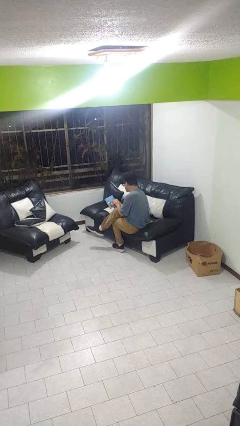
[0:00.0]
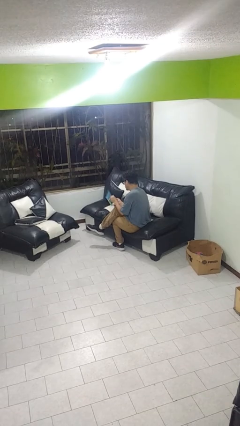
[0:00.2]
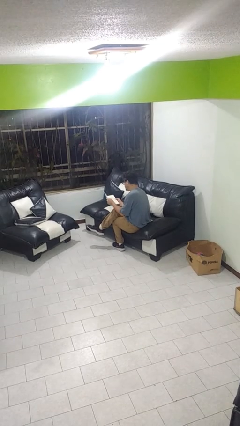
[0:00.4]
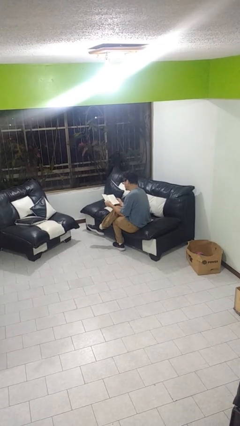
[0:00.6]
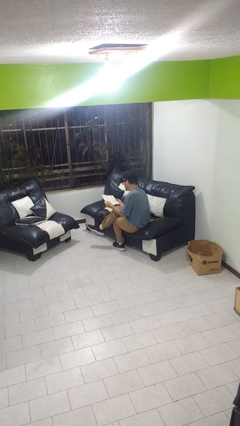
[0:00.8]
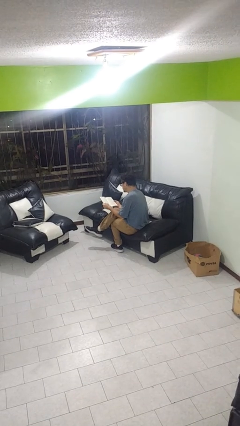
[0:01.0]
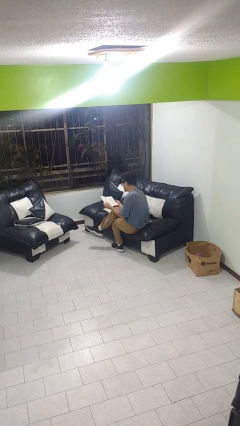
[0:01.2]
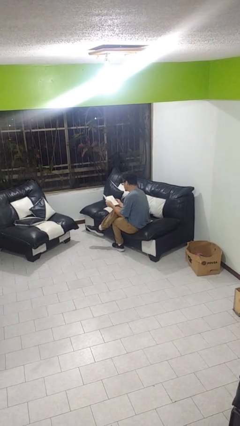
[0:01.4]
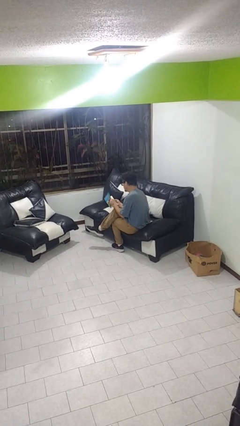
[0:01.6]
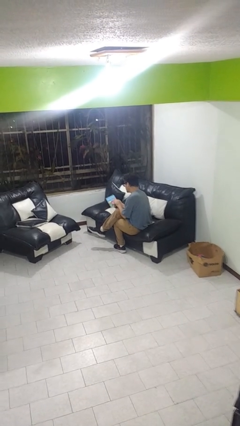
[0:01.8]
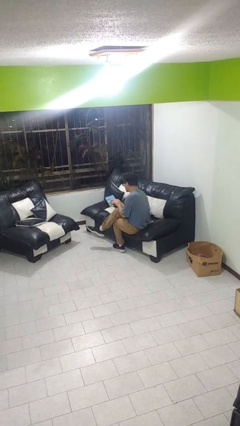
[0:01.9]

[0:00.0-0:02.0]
person reads book

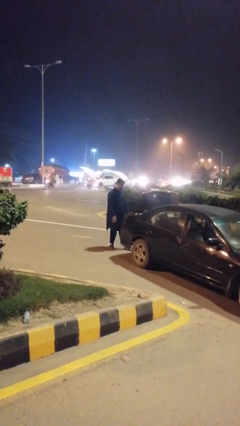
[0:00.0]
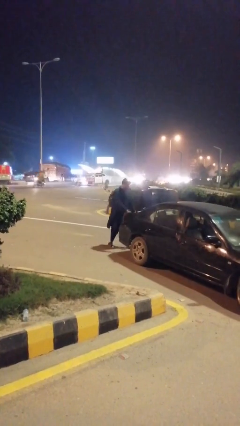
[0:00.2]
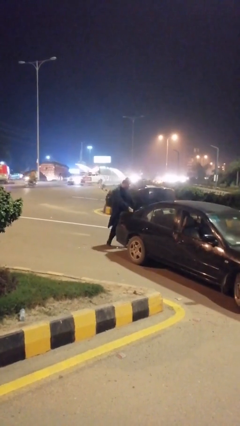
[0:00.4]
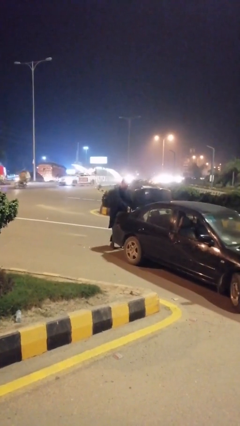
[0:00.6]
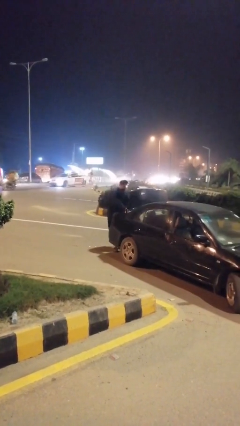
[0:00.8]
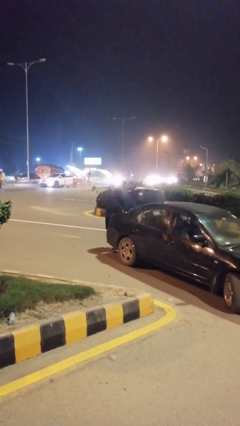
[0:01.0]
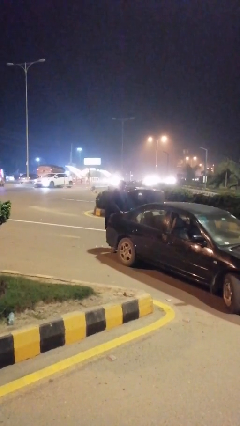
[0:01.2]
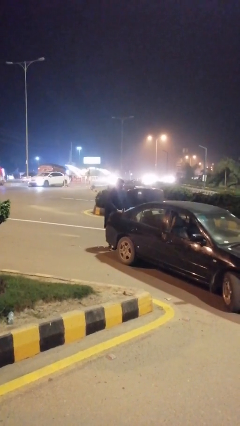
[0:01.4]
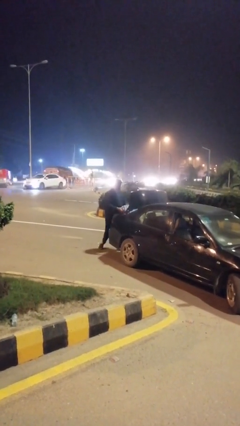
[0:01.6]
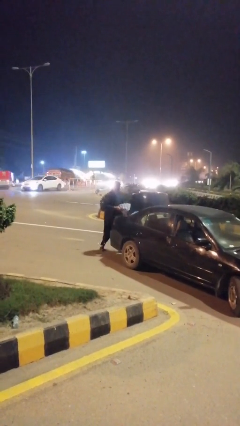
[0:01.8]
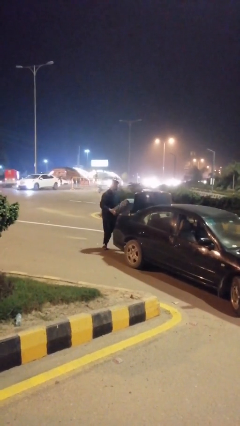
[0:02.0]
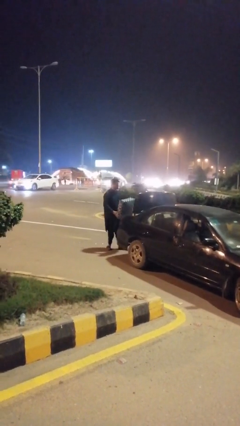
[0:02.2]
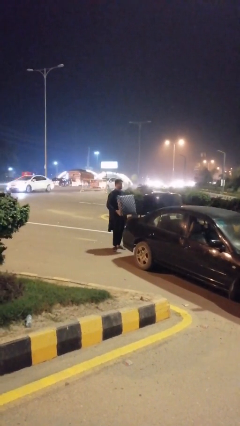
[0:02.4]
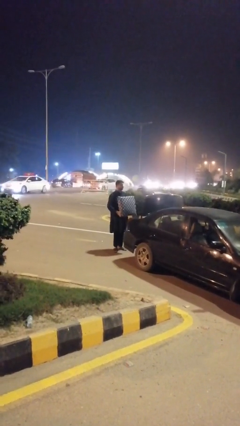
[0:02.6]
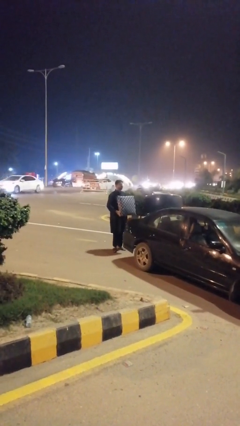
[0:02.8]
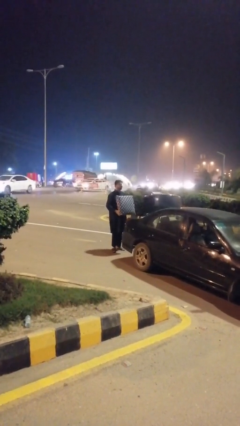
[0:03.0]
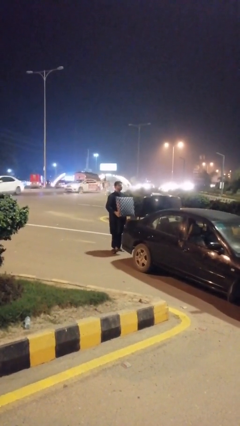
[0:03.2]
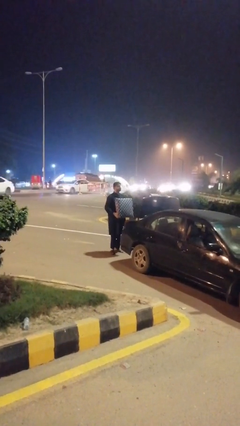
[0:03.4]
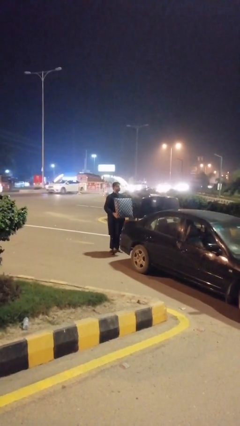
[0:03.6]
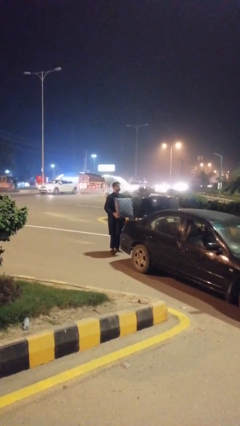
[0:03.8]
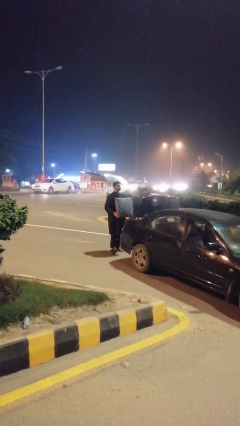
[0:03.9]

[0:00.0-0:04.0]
person unloads car

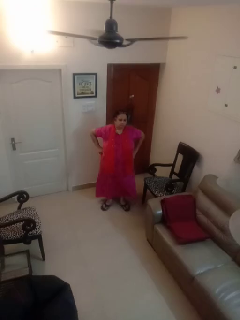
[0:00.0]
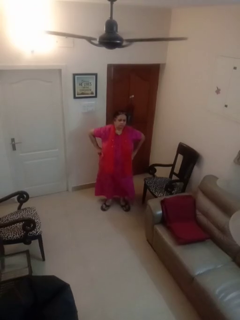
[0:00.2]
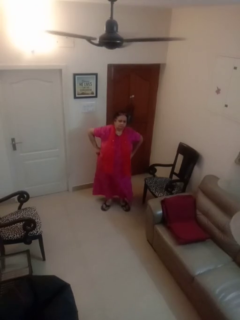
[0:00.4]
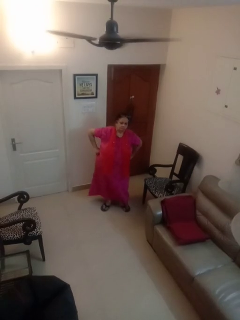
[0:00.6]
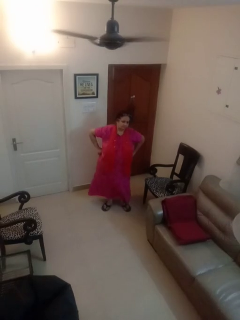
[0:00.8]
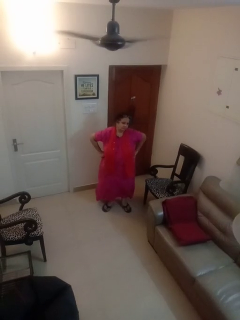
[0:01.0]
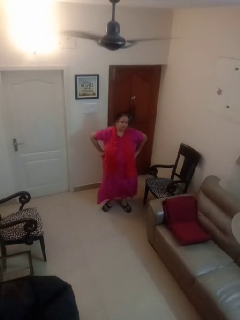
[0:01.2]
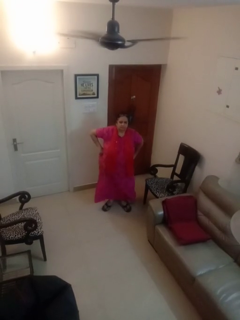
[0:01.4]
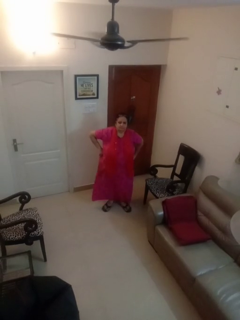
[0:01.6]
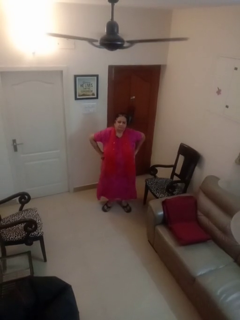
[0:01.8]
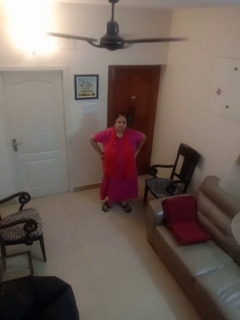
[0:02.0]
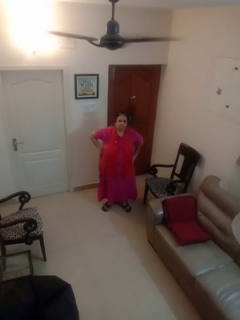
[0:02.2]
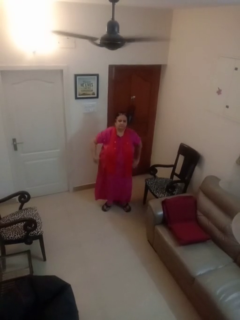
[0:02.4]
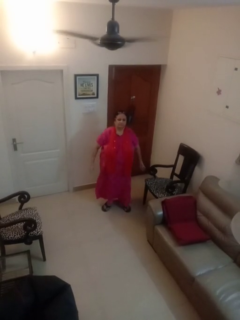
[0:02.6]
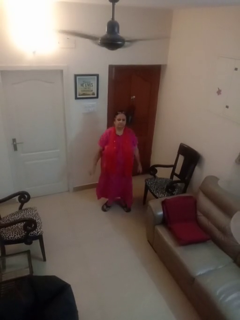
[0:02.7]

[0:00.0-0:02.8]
person wiggles hips

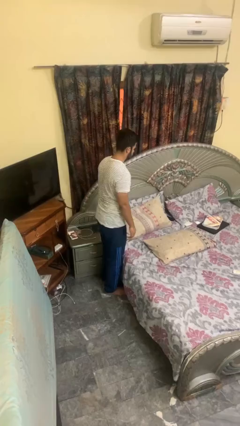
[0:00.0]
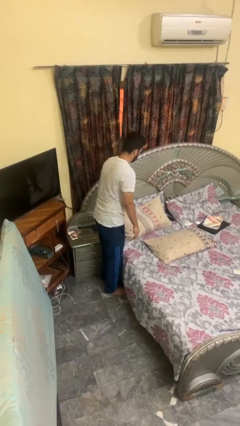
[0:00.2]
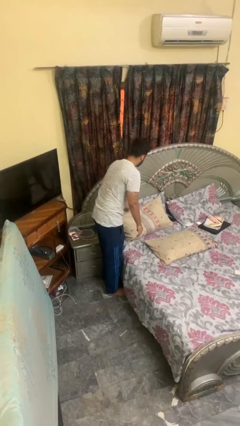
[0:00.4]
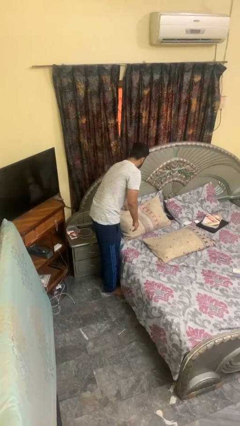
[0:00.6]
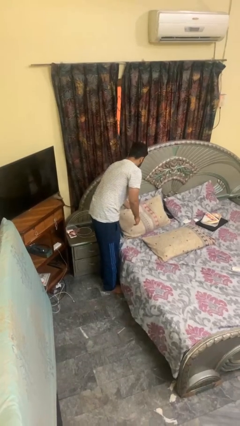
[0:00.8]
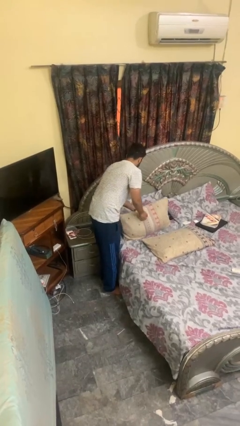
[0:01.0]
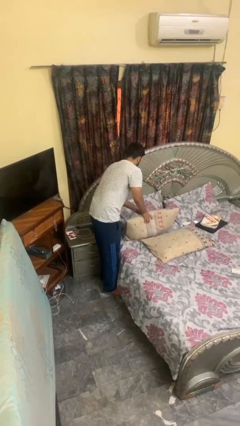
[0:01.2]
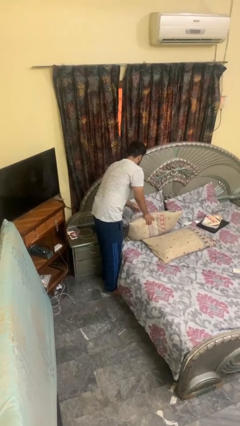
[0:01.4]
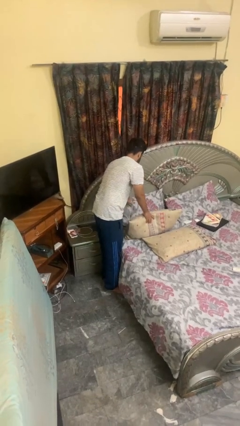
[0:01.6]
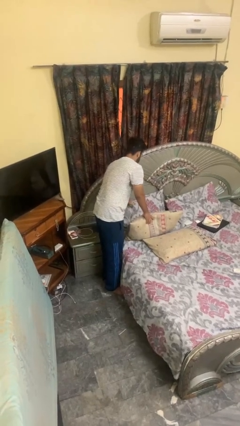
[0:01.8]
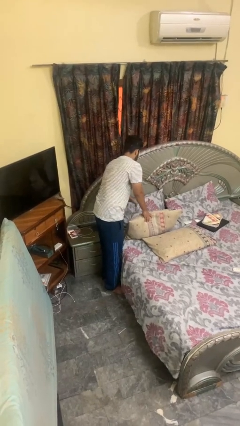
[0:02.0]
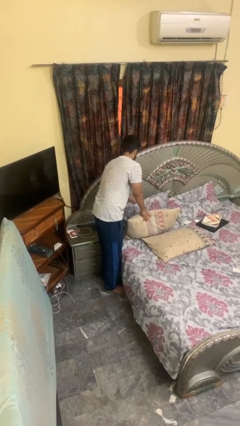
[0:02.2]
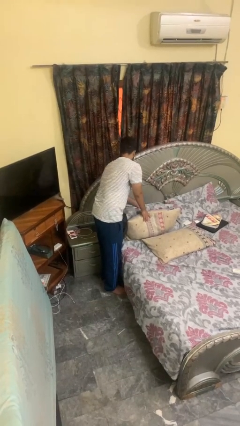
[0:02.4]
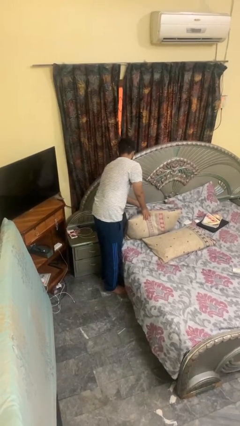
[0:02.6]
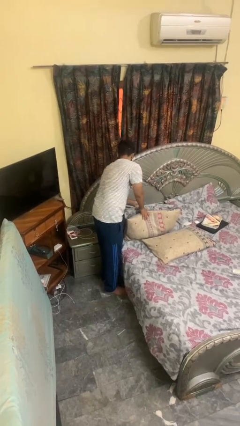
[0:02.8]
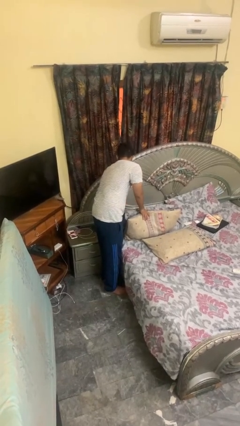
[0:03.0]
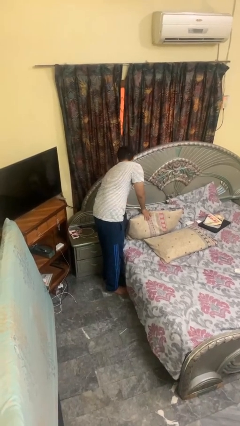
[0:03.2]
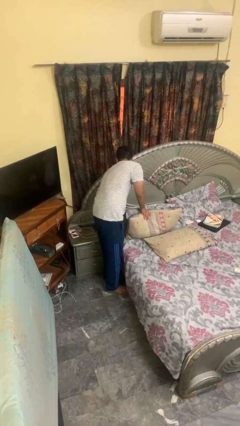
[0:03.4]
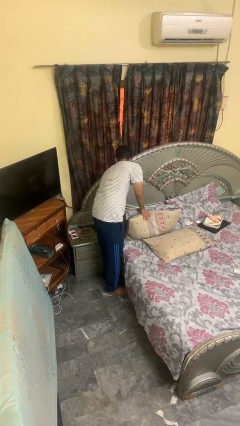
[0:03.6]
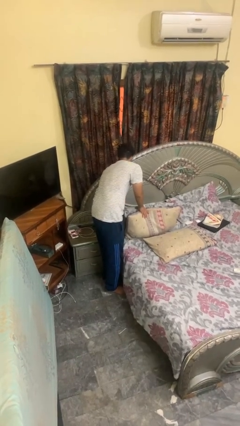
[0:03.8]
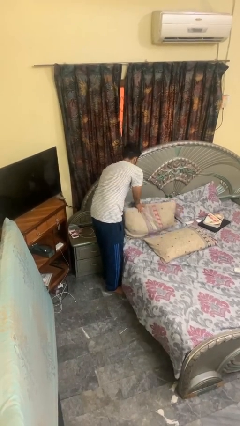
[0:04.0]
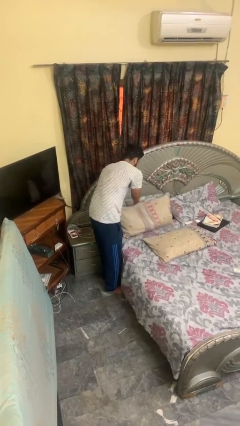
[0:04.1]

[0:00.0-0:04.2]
person searches under bed

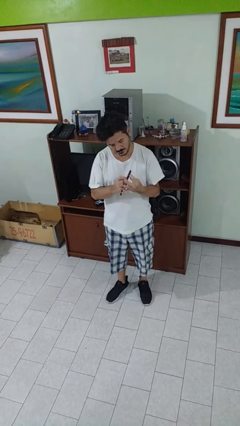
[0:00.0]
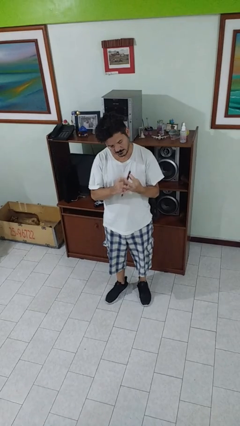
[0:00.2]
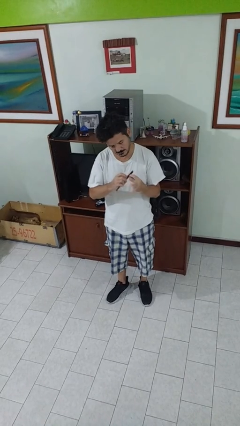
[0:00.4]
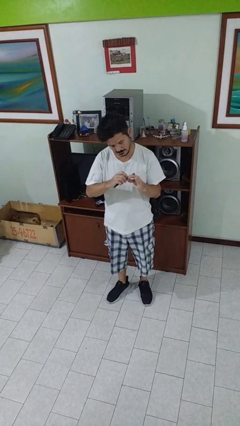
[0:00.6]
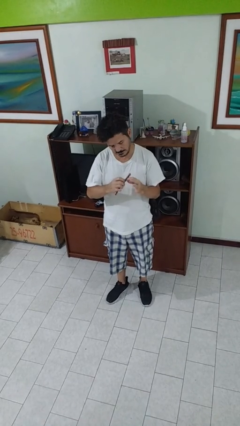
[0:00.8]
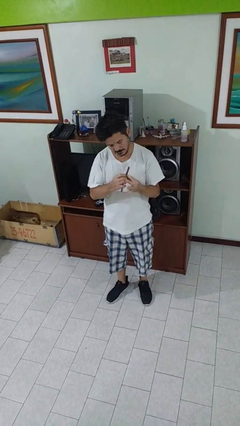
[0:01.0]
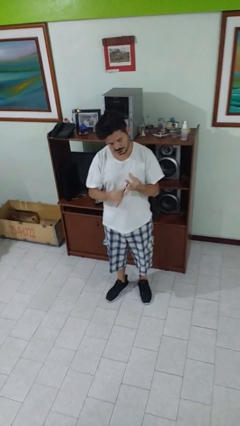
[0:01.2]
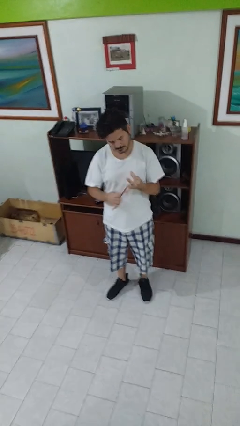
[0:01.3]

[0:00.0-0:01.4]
person files fingernails

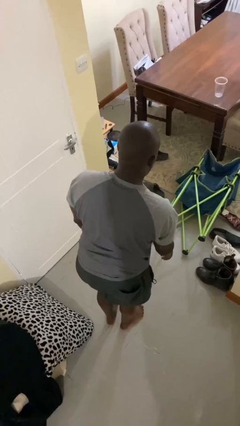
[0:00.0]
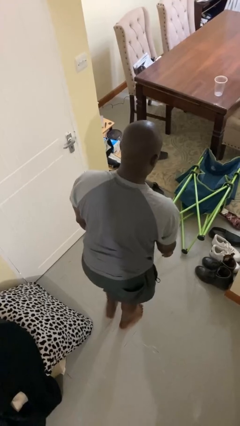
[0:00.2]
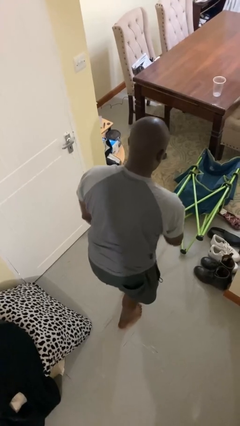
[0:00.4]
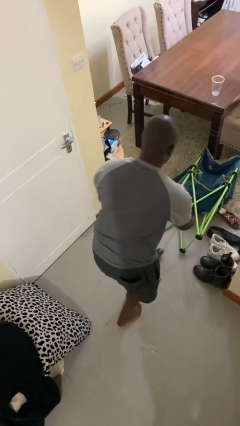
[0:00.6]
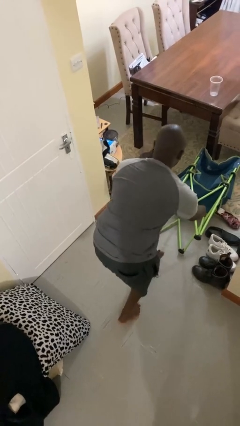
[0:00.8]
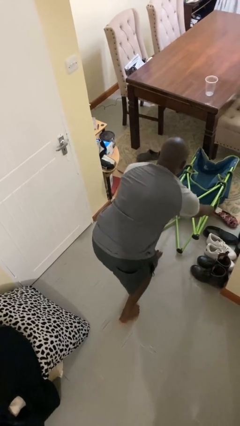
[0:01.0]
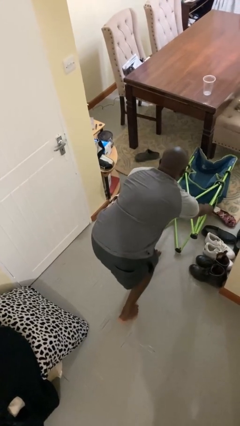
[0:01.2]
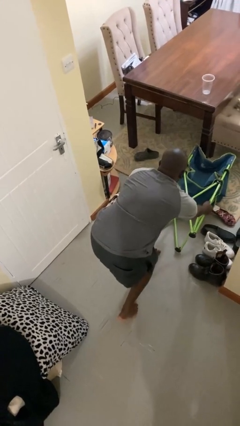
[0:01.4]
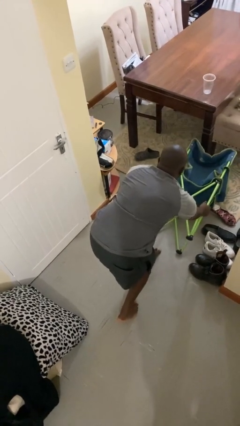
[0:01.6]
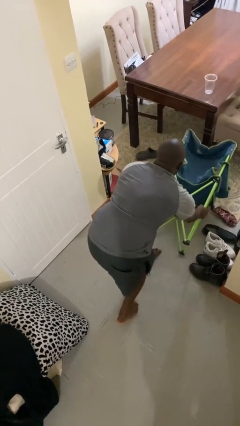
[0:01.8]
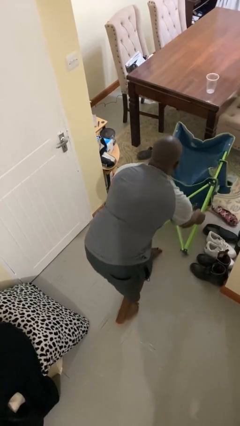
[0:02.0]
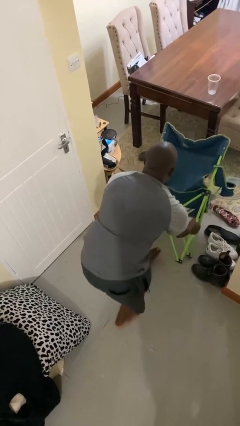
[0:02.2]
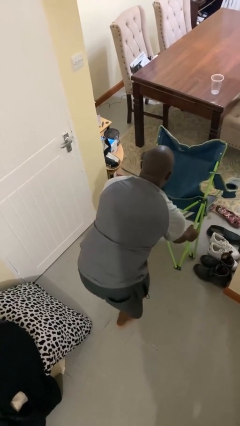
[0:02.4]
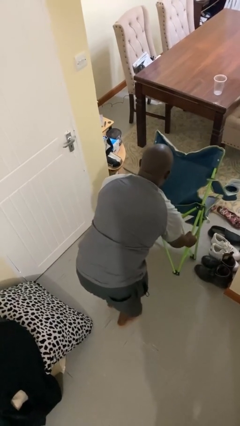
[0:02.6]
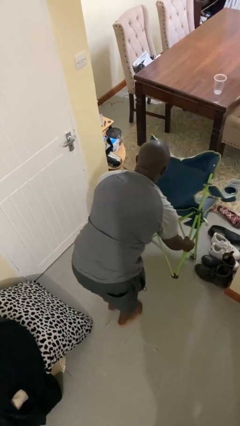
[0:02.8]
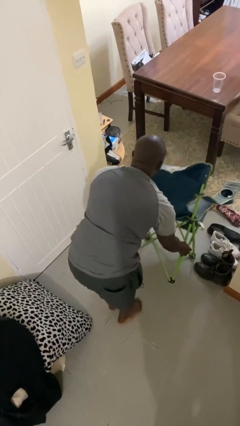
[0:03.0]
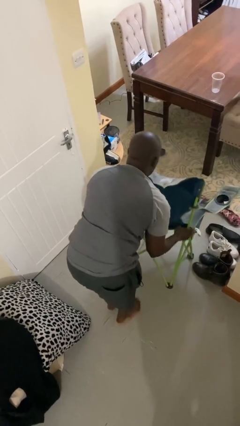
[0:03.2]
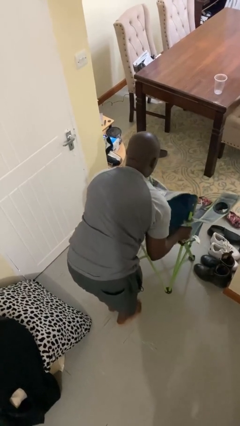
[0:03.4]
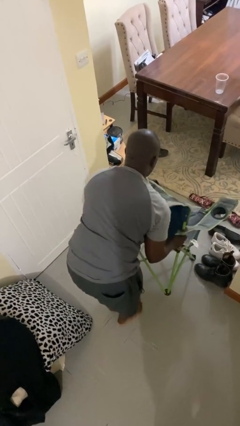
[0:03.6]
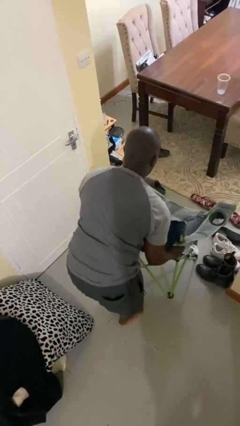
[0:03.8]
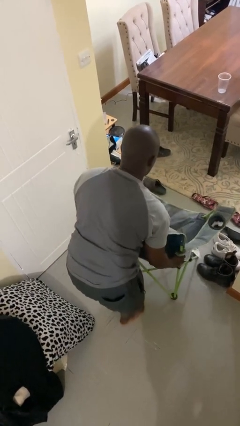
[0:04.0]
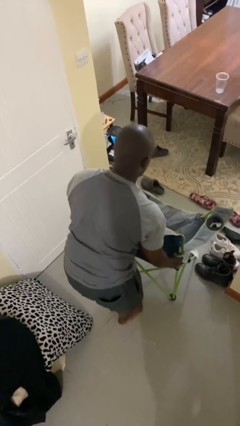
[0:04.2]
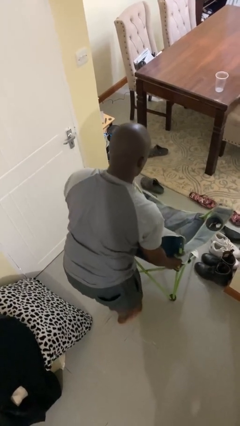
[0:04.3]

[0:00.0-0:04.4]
person sets upright furniture
